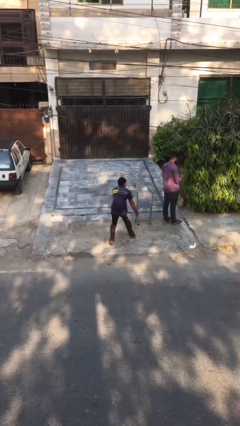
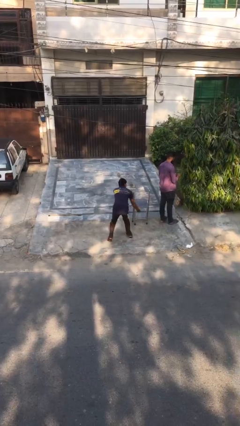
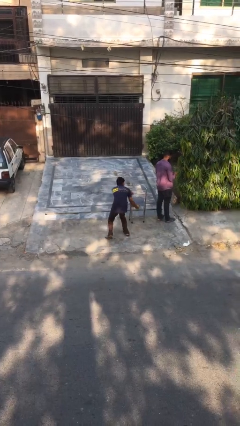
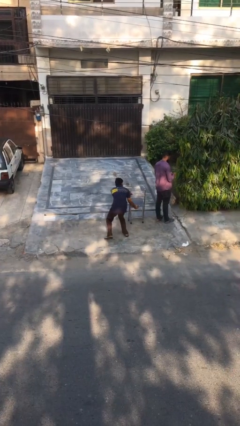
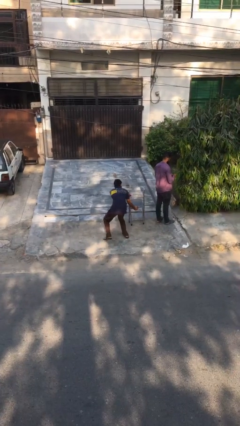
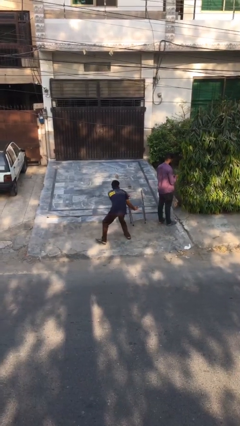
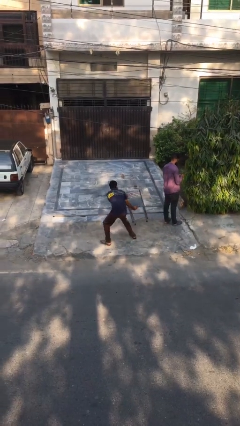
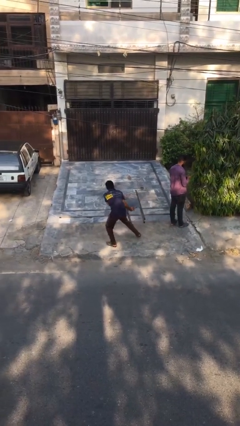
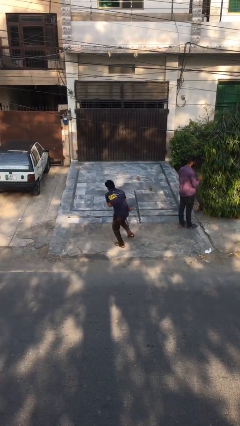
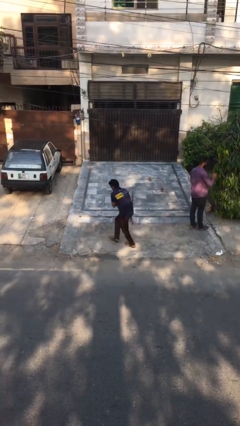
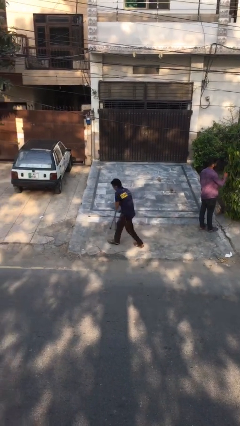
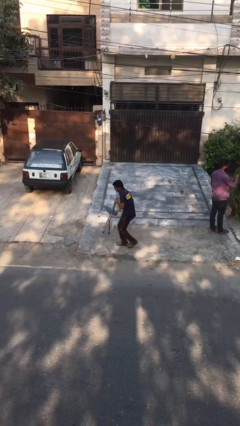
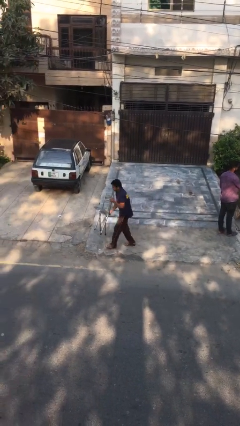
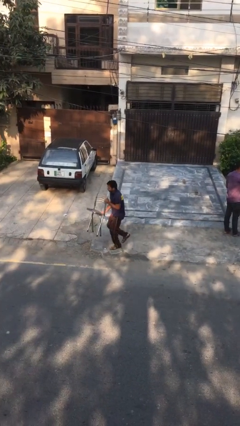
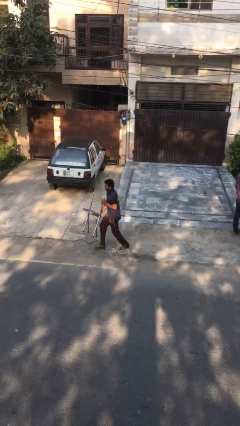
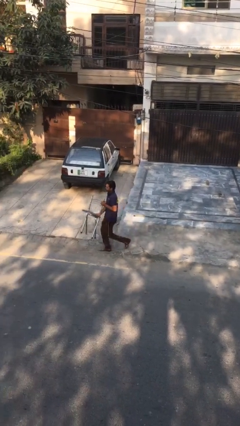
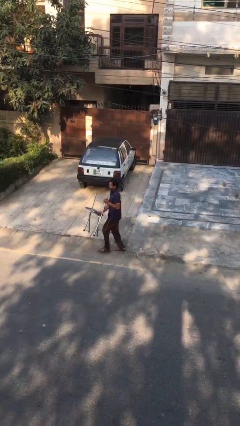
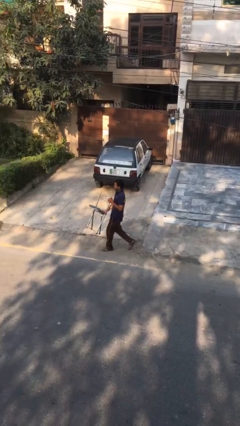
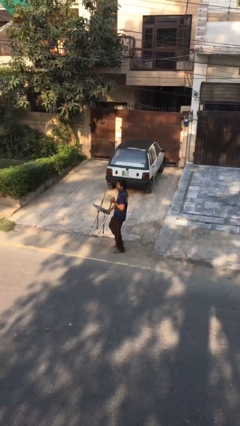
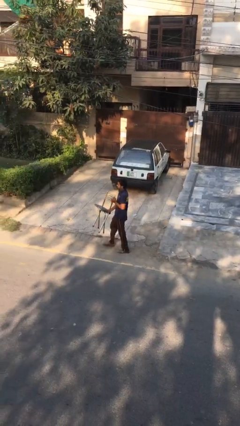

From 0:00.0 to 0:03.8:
person steals object from person

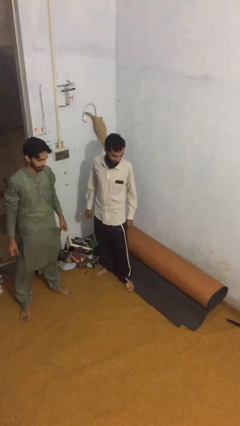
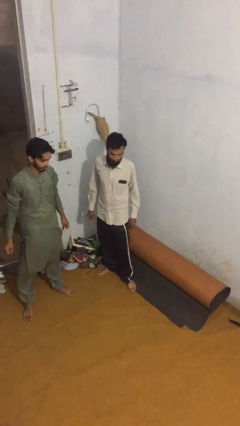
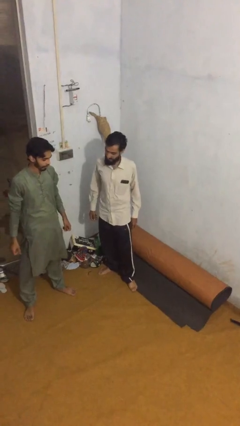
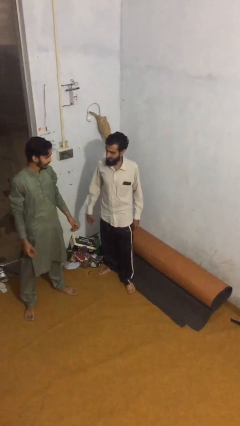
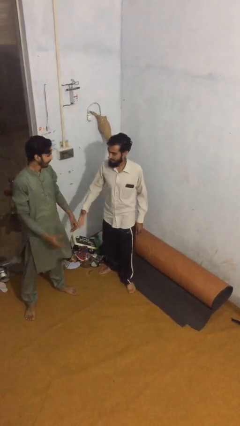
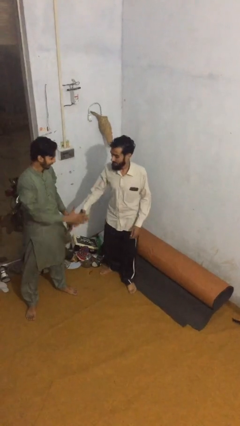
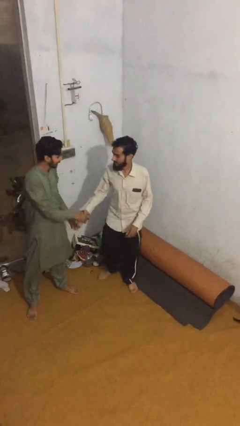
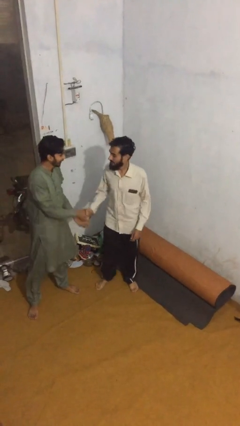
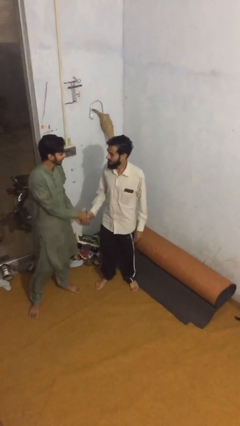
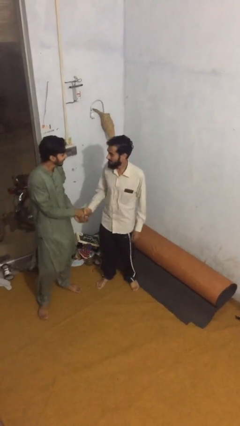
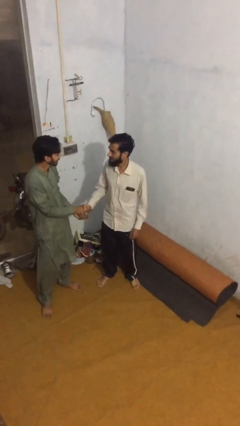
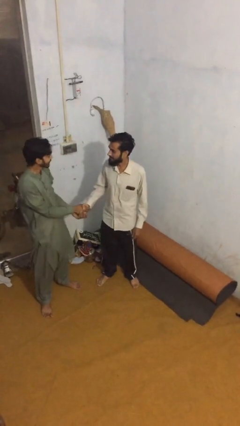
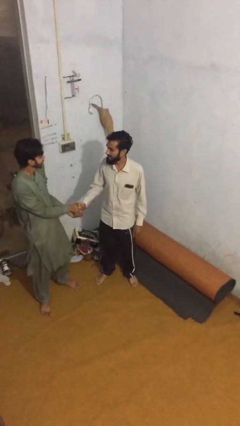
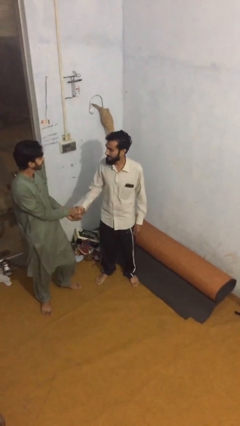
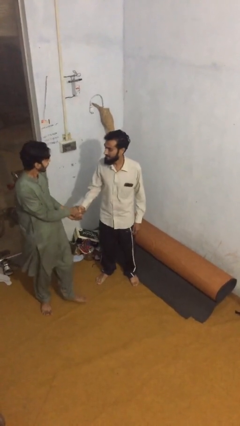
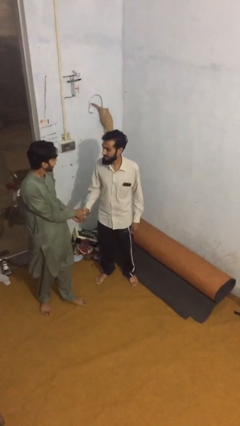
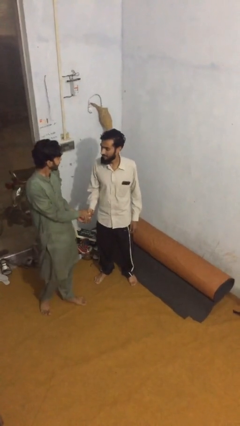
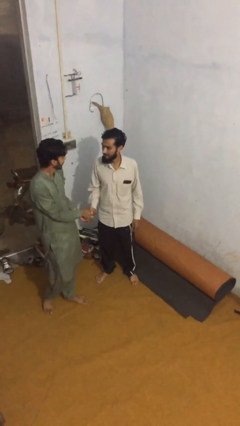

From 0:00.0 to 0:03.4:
person shakes hand

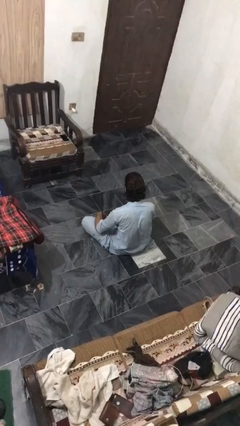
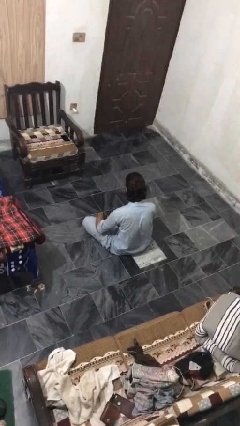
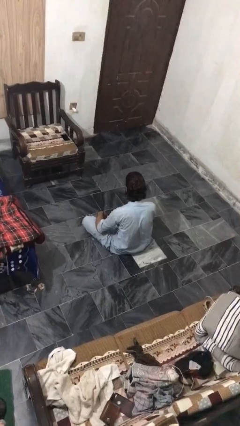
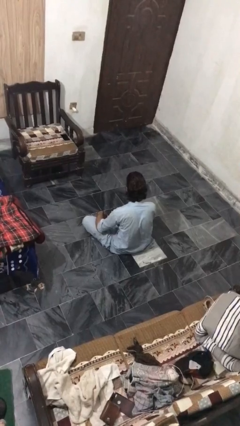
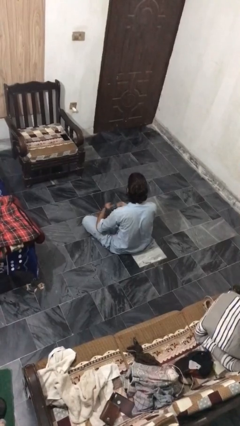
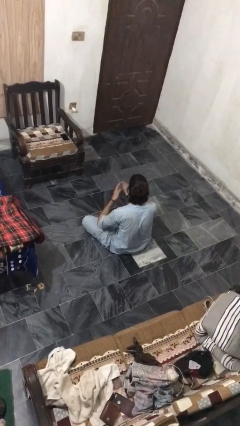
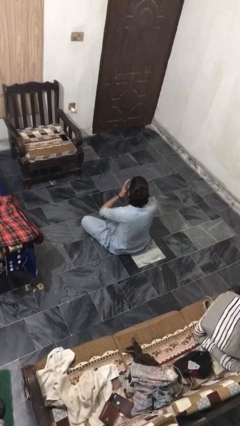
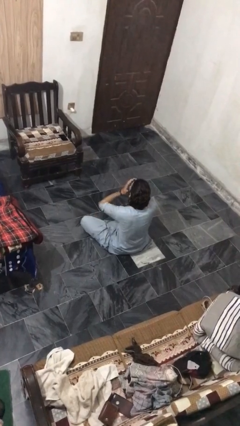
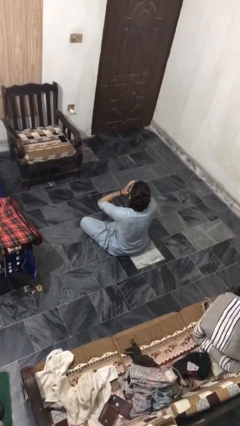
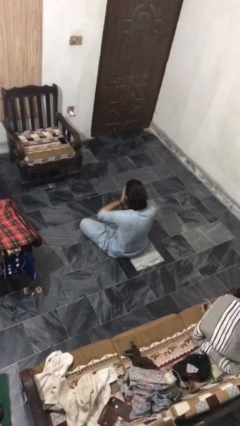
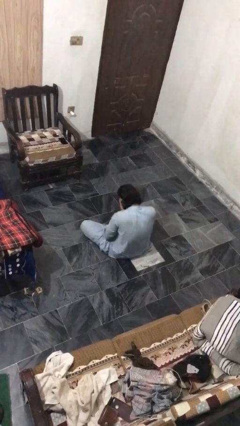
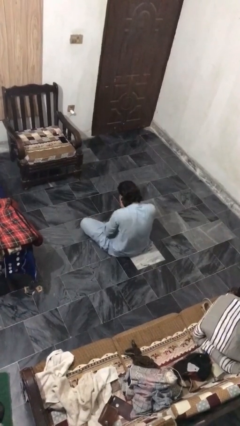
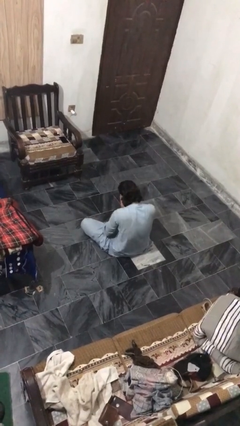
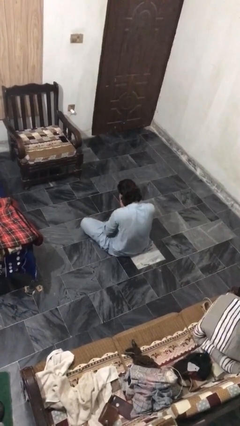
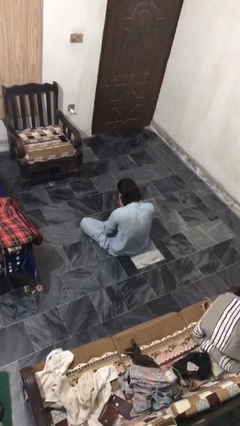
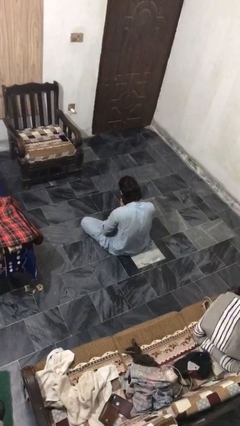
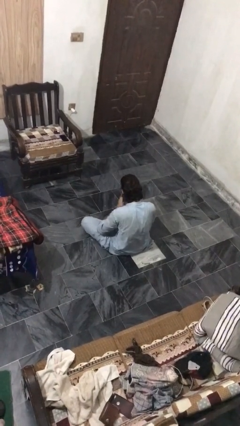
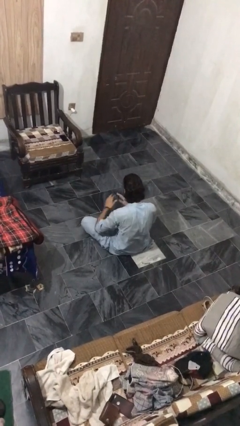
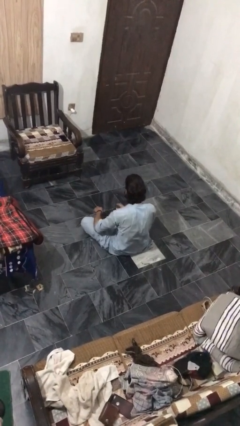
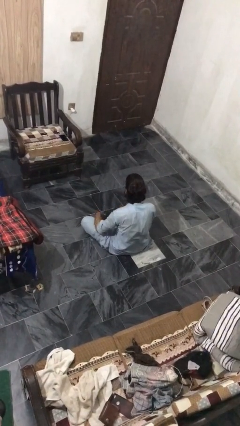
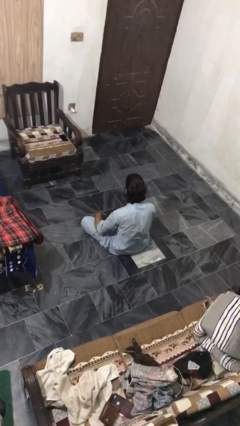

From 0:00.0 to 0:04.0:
person sneezes into hand

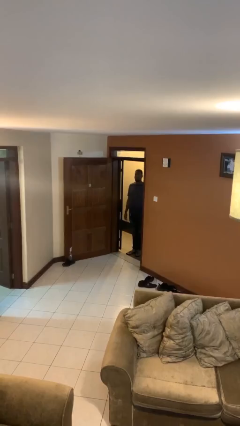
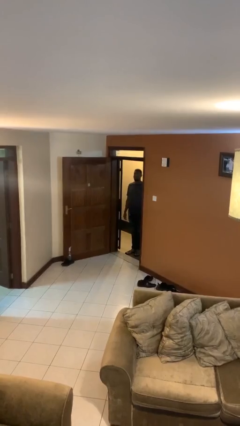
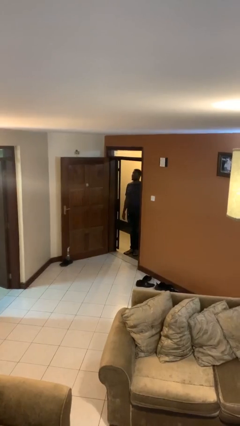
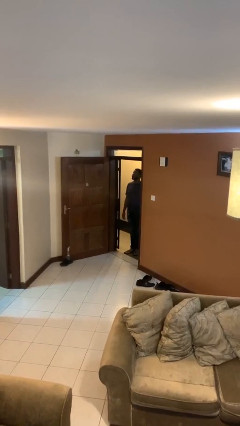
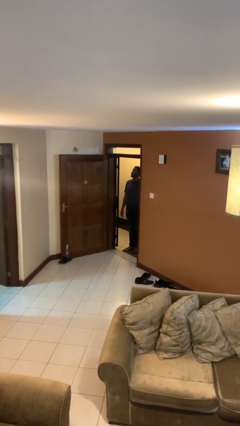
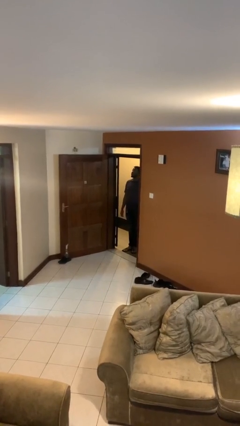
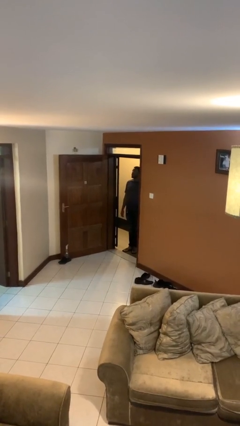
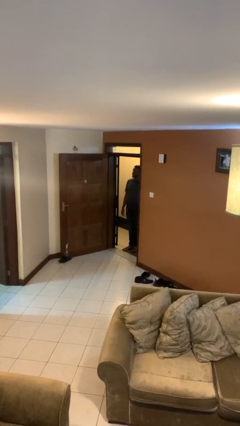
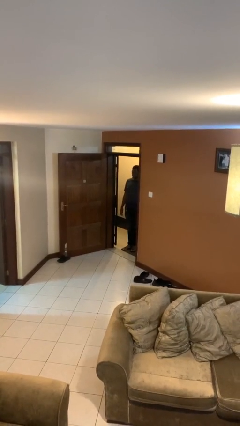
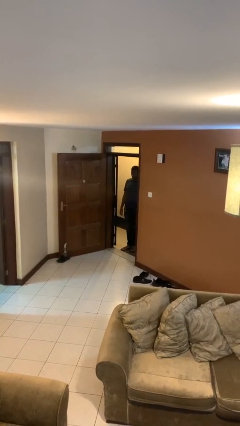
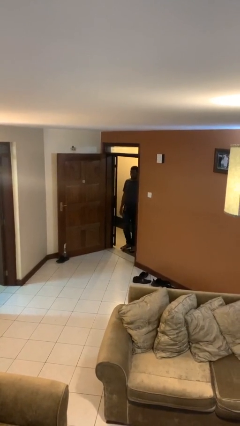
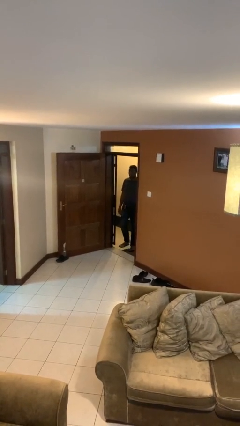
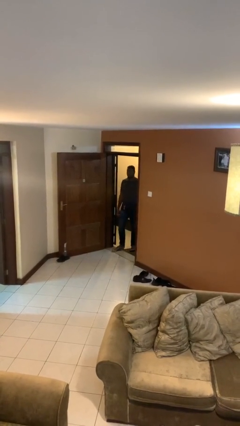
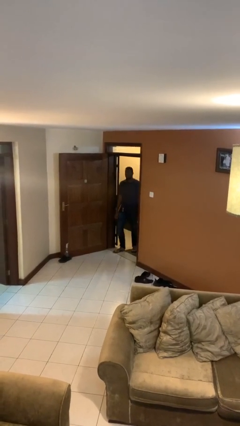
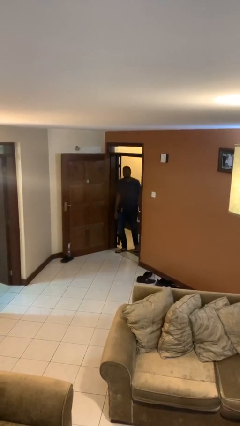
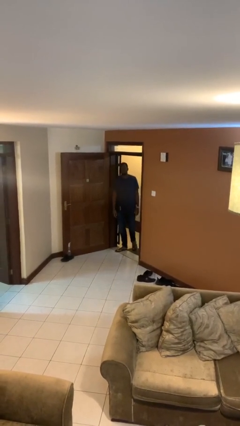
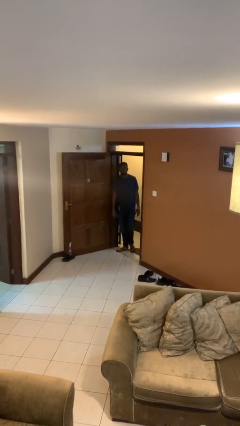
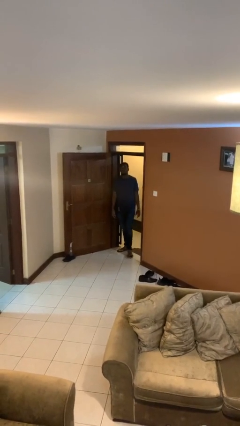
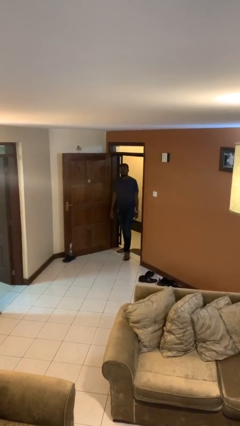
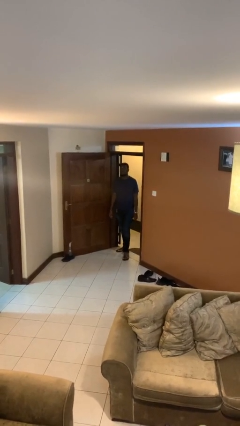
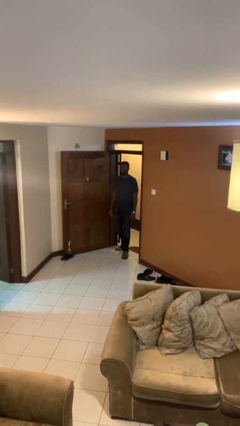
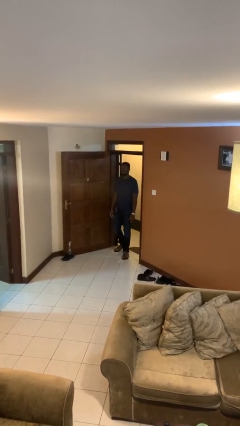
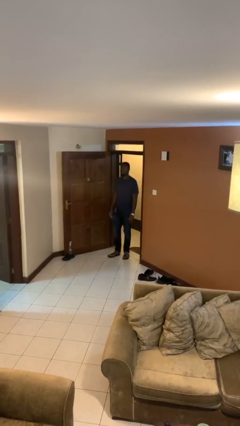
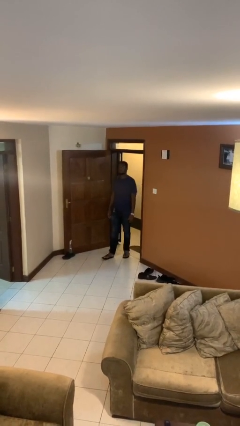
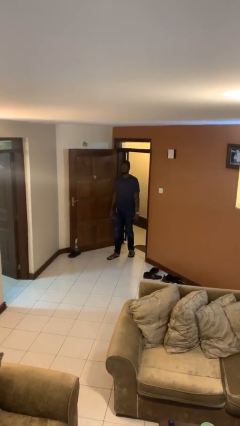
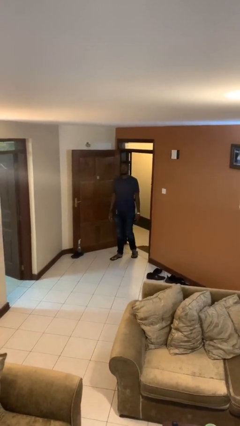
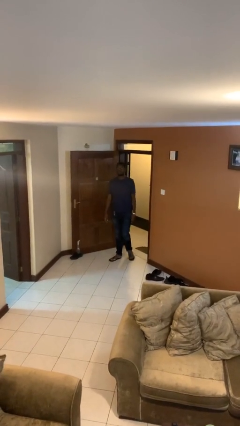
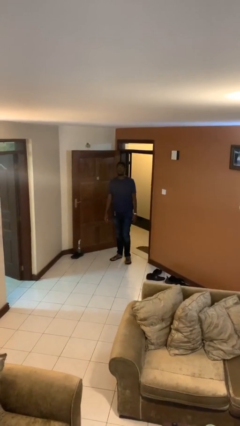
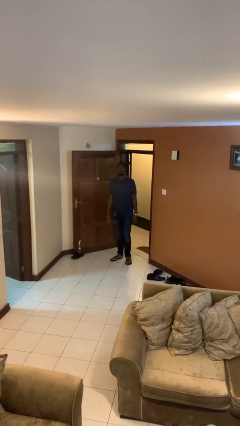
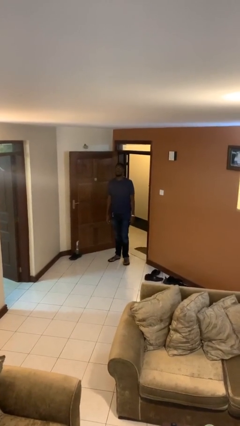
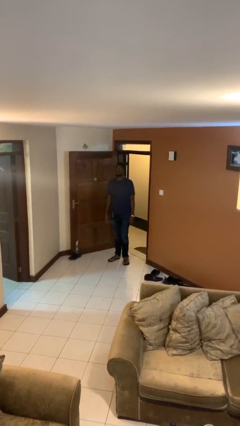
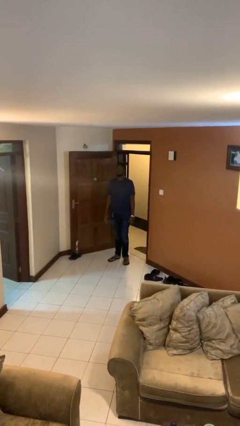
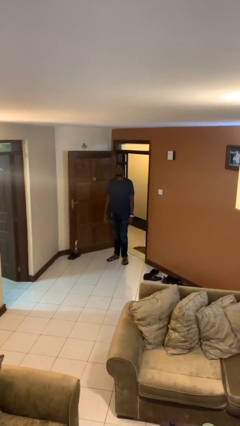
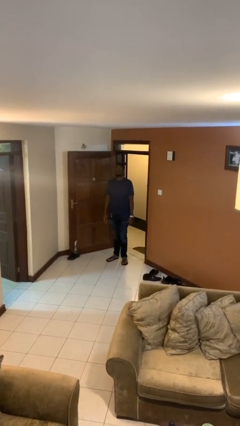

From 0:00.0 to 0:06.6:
person enters scene through structure
